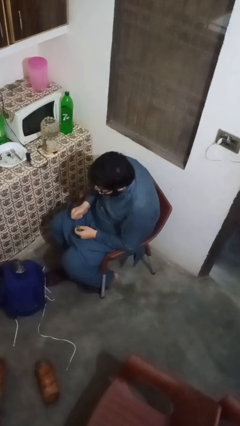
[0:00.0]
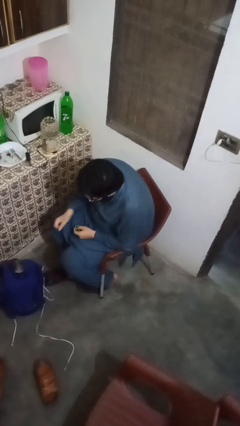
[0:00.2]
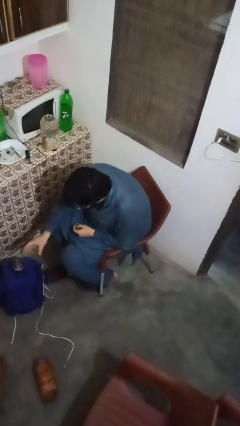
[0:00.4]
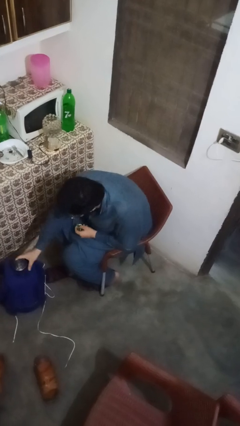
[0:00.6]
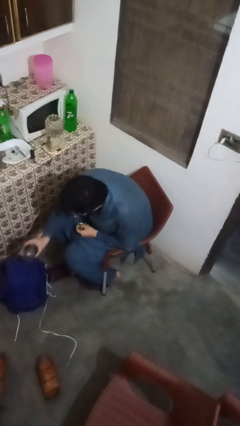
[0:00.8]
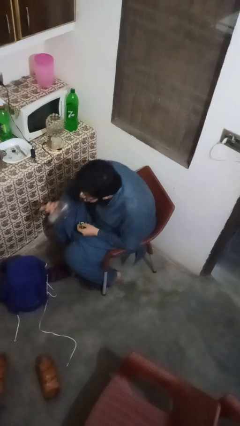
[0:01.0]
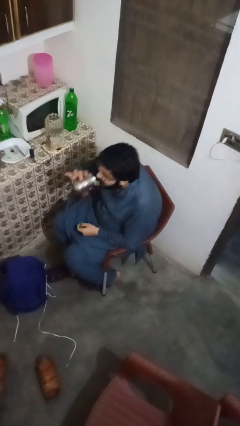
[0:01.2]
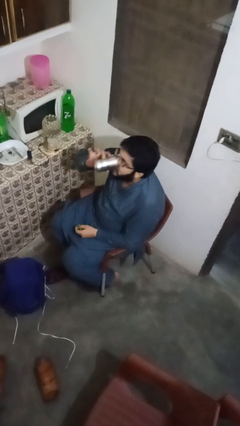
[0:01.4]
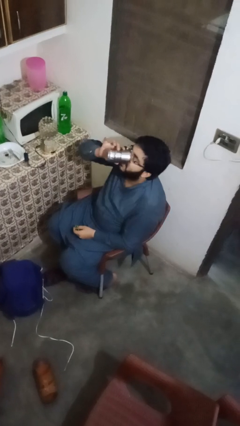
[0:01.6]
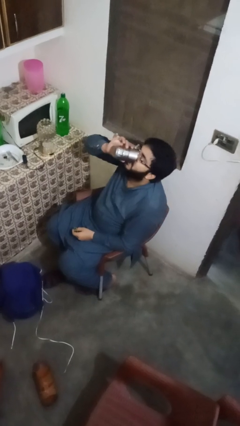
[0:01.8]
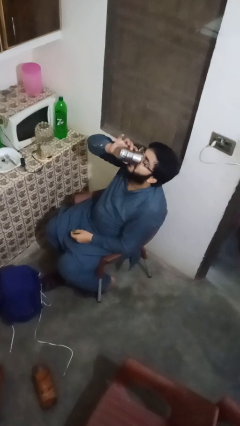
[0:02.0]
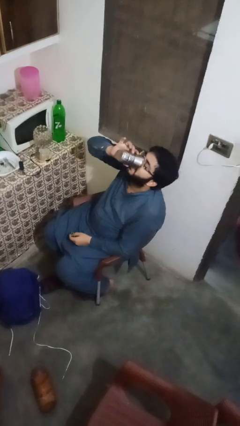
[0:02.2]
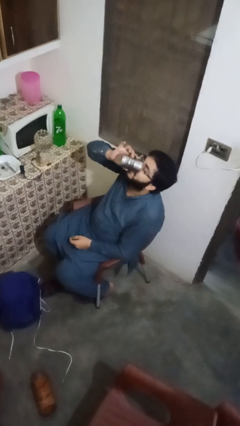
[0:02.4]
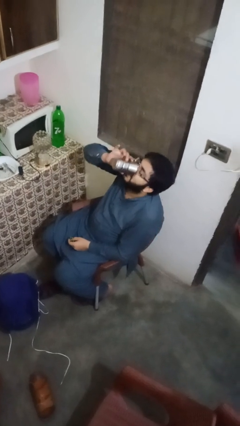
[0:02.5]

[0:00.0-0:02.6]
person drinks from cup

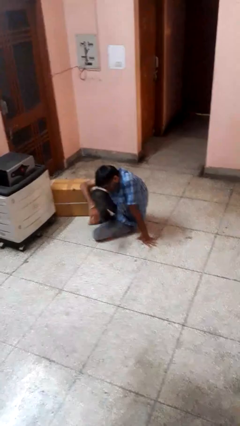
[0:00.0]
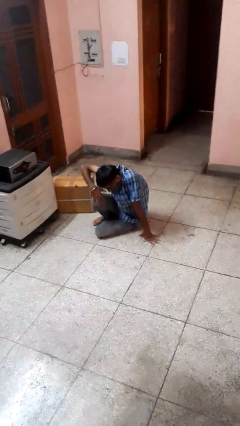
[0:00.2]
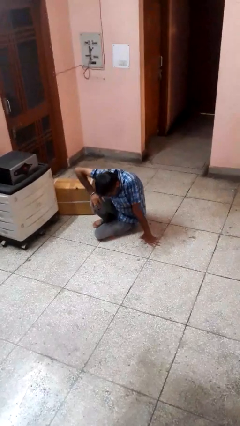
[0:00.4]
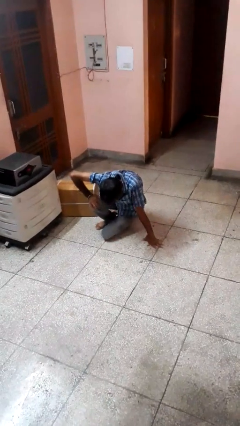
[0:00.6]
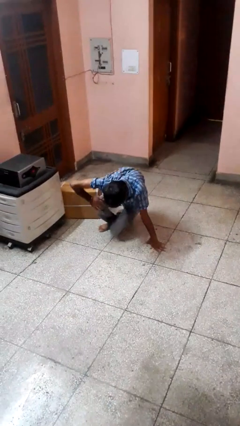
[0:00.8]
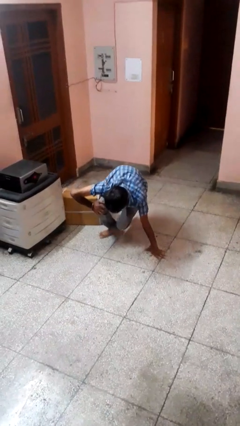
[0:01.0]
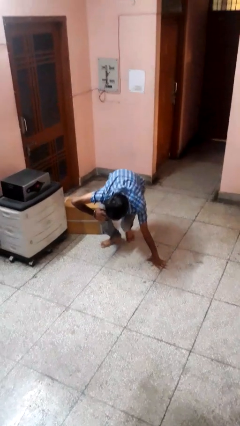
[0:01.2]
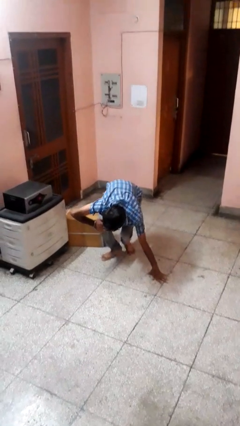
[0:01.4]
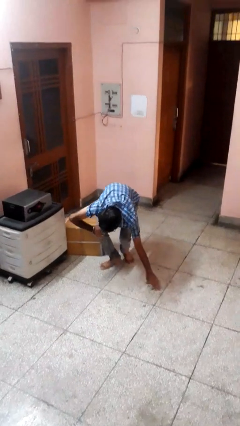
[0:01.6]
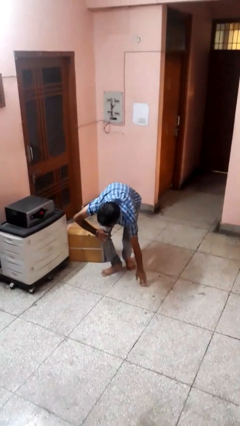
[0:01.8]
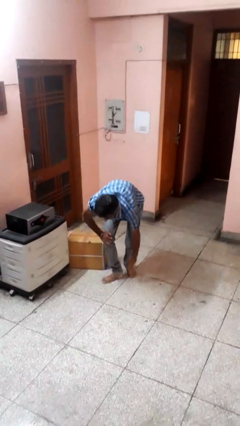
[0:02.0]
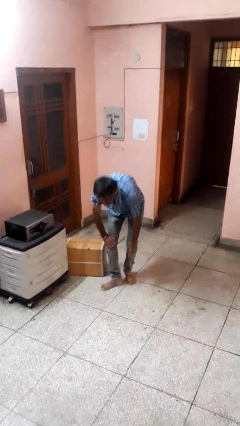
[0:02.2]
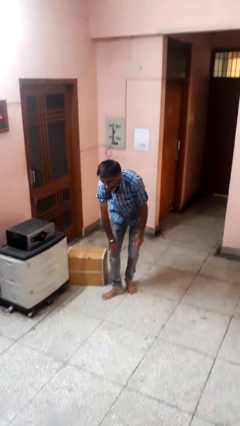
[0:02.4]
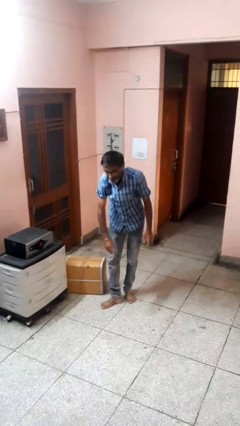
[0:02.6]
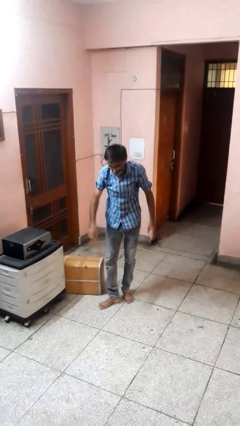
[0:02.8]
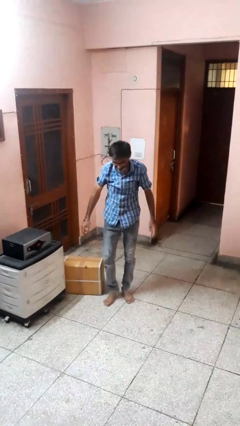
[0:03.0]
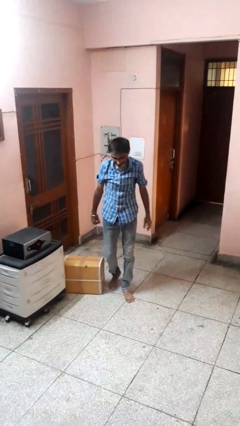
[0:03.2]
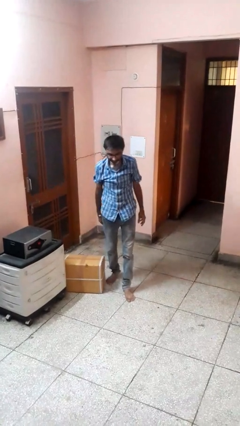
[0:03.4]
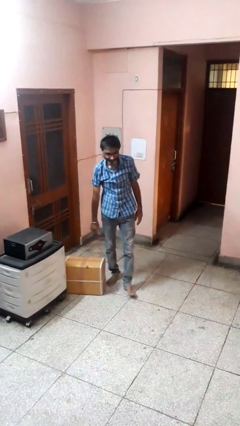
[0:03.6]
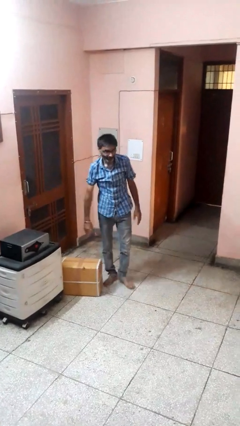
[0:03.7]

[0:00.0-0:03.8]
person stands up from floor

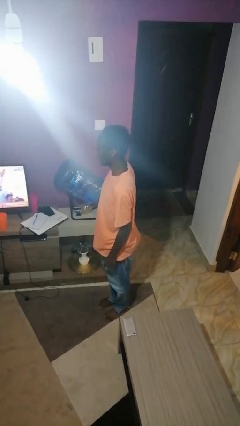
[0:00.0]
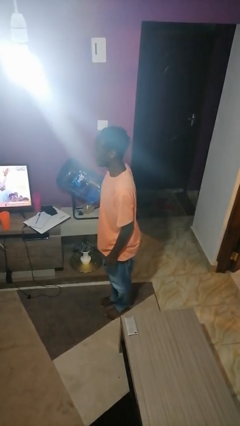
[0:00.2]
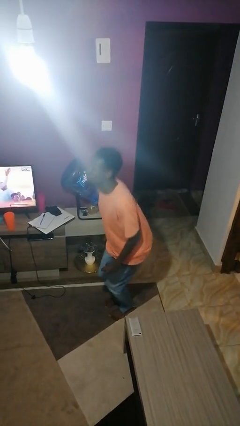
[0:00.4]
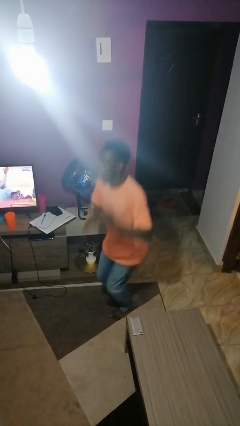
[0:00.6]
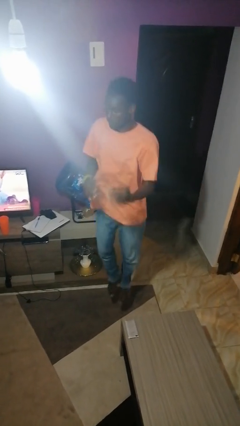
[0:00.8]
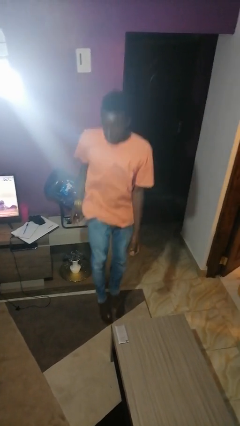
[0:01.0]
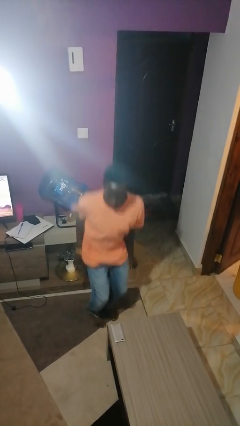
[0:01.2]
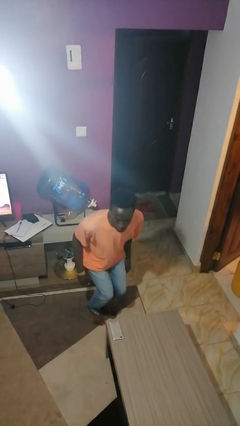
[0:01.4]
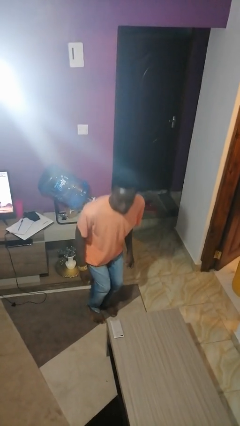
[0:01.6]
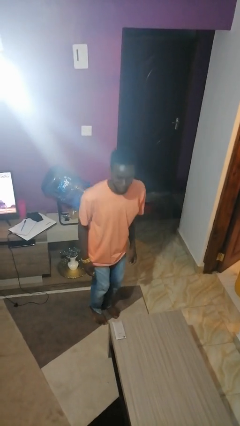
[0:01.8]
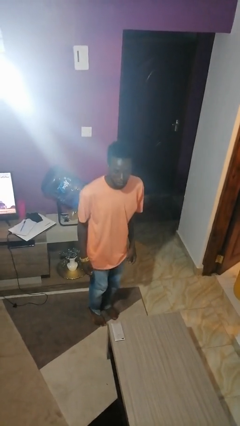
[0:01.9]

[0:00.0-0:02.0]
person jumps

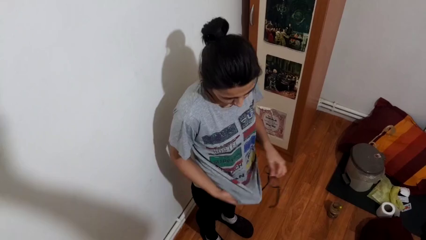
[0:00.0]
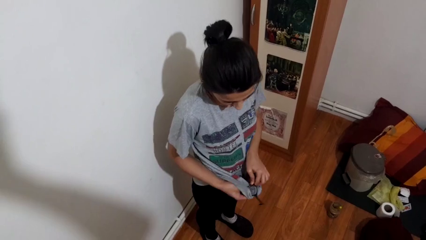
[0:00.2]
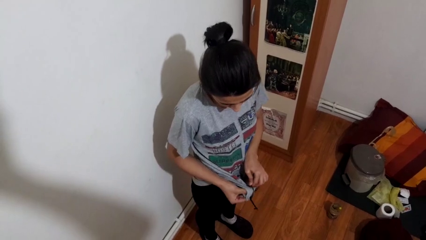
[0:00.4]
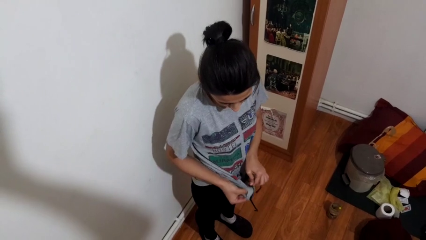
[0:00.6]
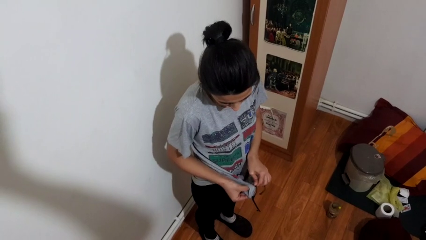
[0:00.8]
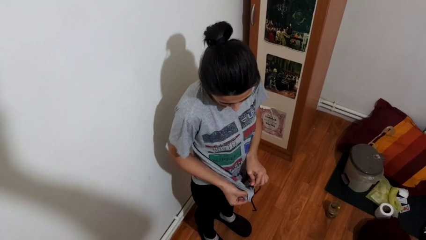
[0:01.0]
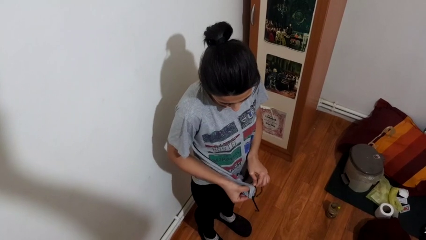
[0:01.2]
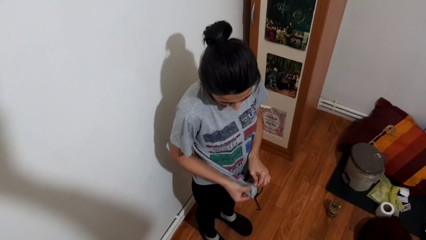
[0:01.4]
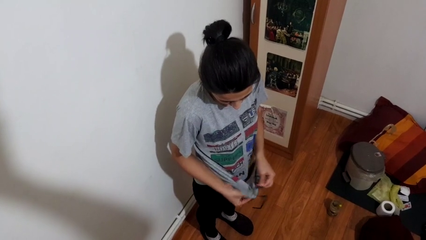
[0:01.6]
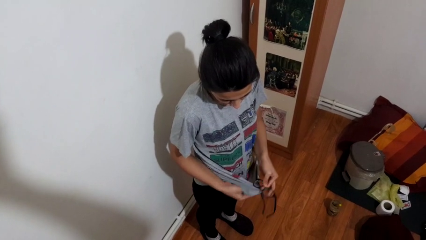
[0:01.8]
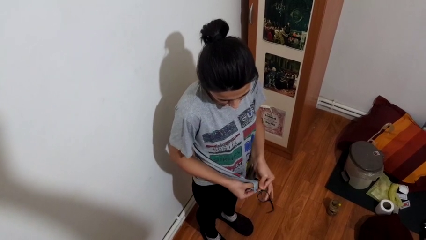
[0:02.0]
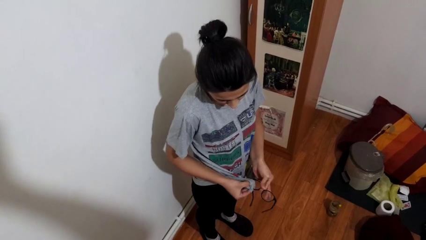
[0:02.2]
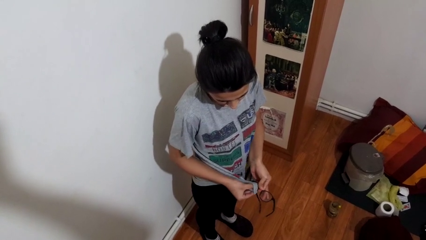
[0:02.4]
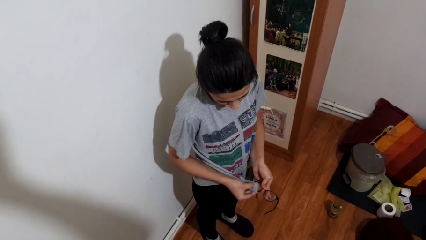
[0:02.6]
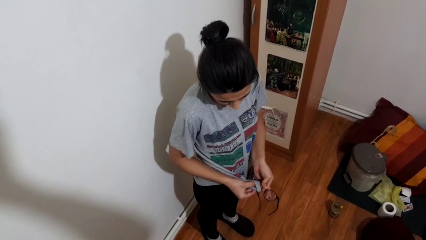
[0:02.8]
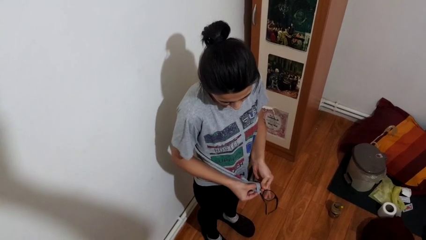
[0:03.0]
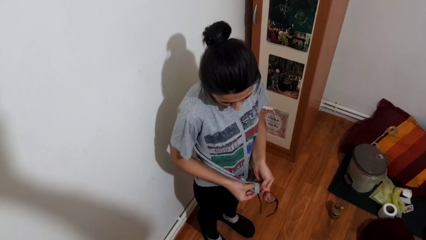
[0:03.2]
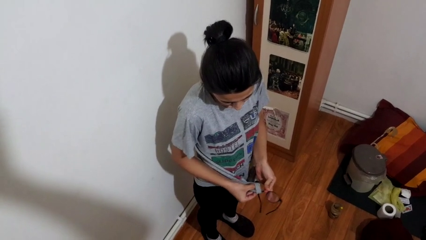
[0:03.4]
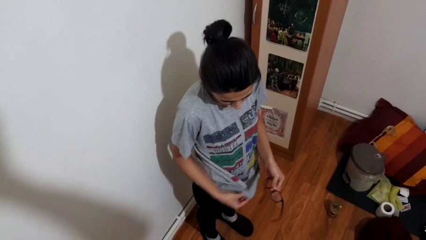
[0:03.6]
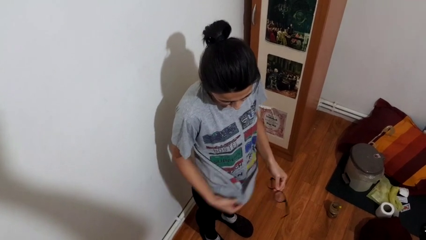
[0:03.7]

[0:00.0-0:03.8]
person cleans eyeglasses

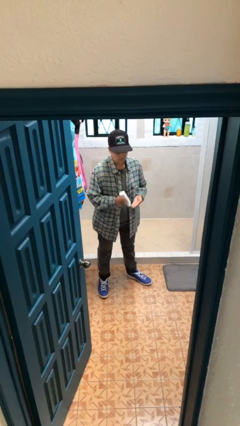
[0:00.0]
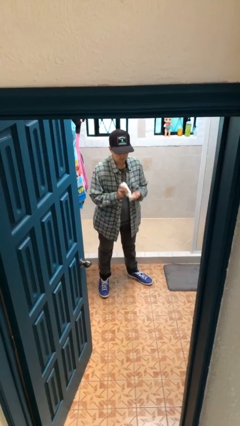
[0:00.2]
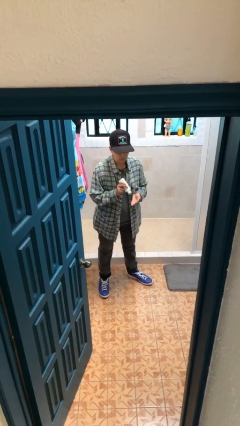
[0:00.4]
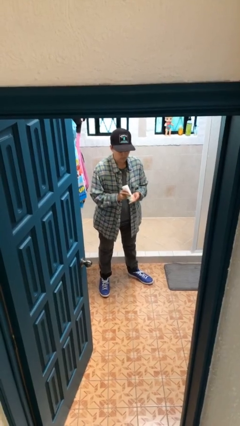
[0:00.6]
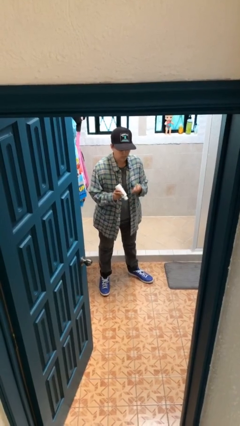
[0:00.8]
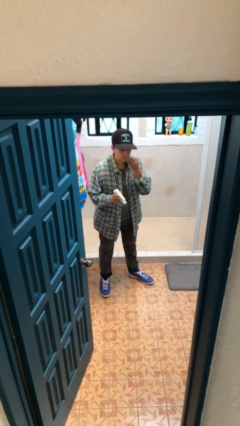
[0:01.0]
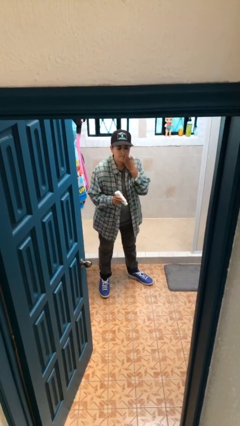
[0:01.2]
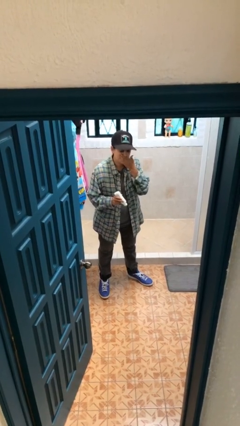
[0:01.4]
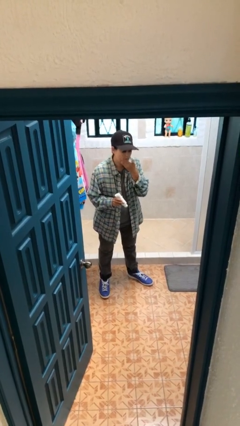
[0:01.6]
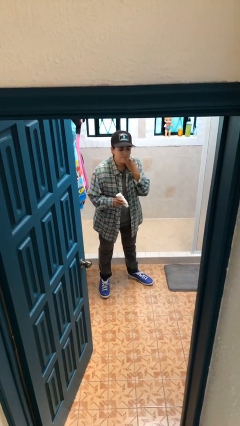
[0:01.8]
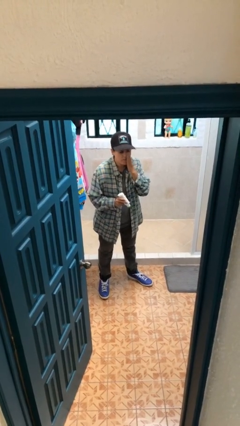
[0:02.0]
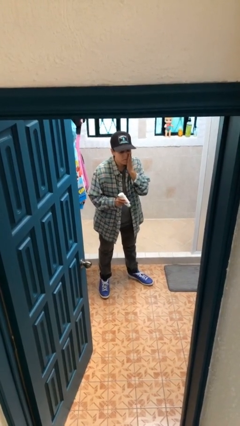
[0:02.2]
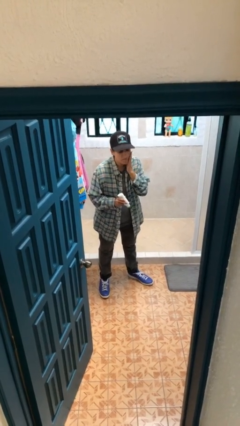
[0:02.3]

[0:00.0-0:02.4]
person applies facial moisturizer

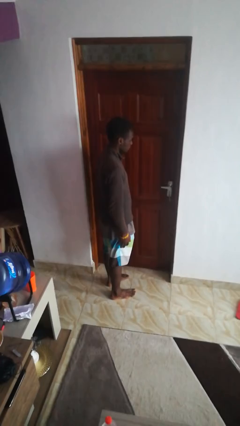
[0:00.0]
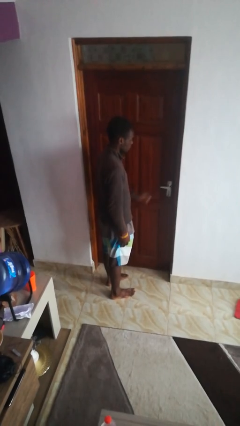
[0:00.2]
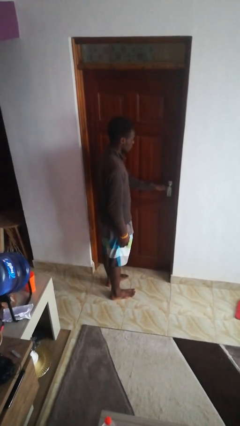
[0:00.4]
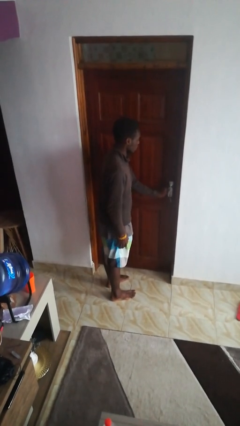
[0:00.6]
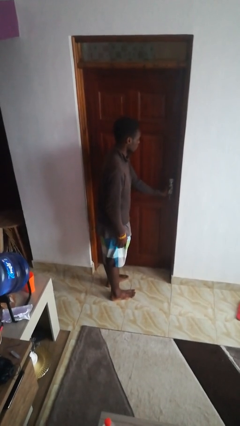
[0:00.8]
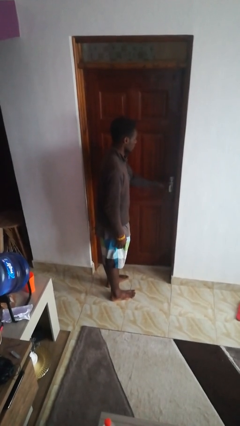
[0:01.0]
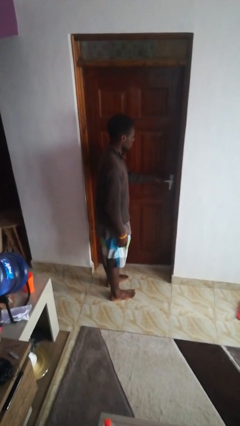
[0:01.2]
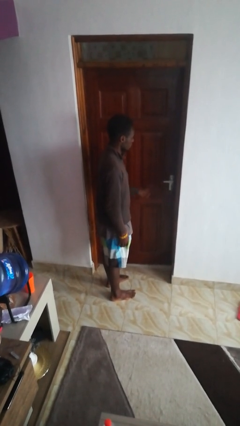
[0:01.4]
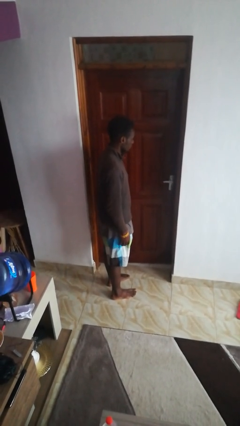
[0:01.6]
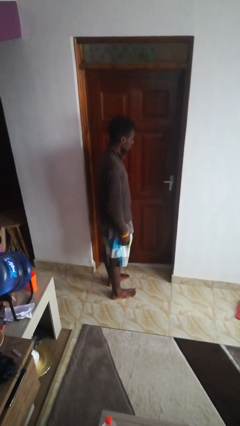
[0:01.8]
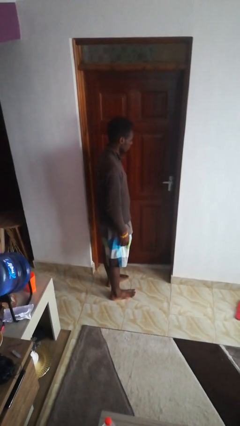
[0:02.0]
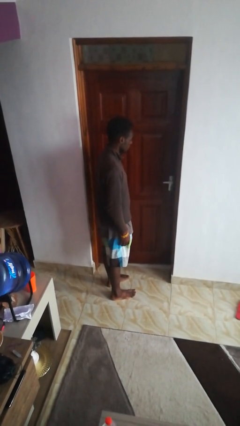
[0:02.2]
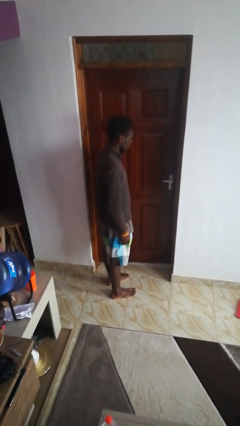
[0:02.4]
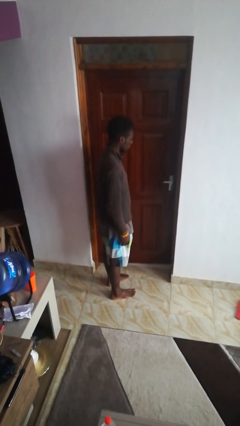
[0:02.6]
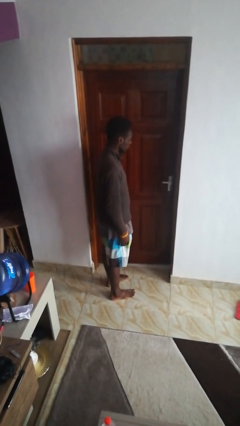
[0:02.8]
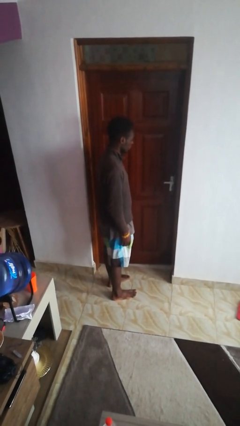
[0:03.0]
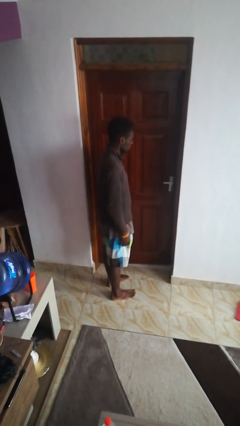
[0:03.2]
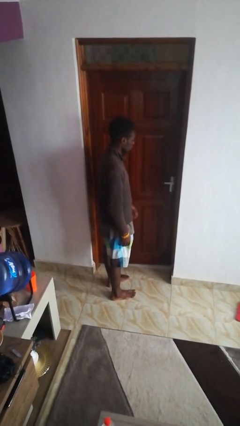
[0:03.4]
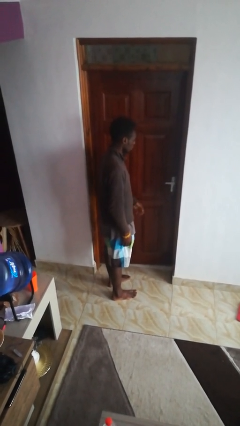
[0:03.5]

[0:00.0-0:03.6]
person opens facility door
